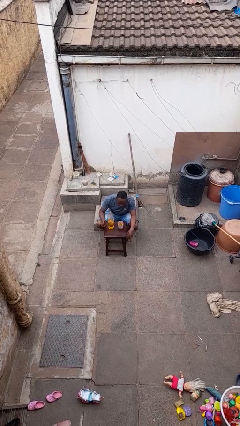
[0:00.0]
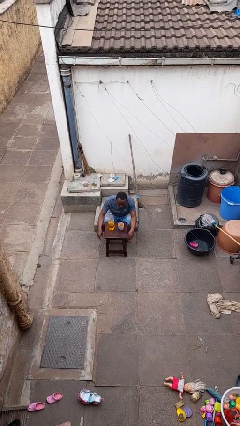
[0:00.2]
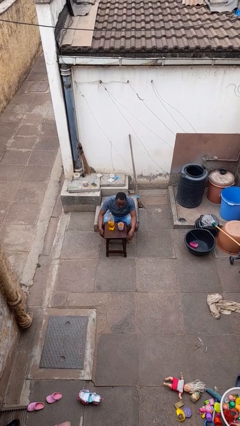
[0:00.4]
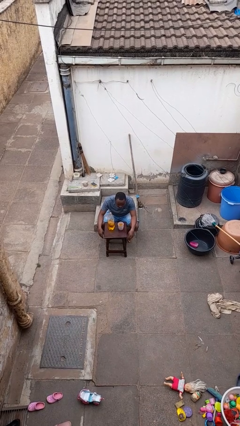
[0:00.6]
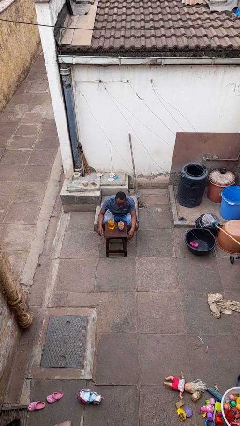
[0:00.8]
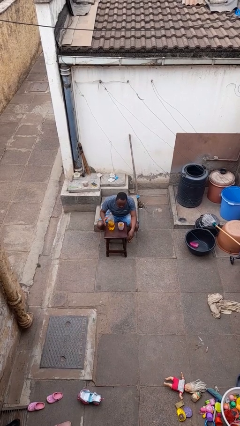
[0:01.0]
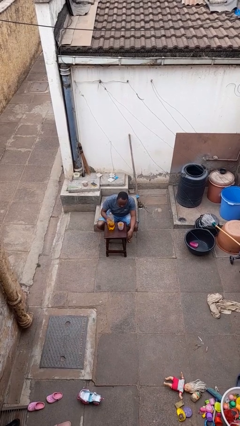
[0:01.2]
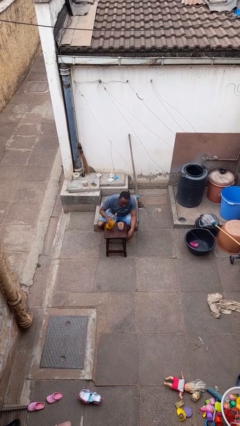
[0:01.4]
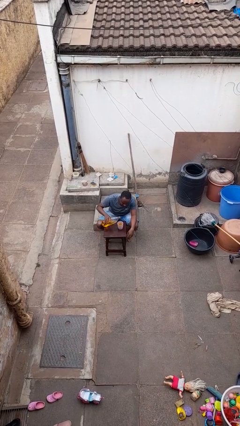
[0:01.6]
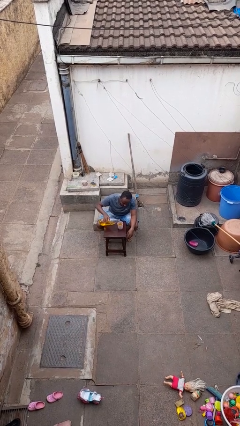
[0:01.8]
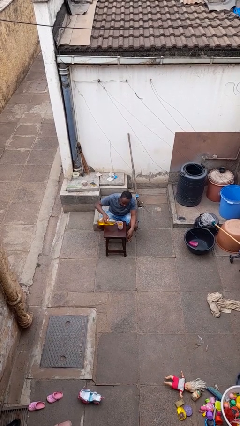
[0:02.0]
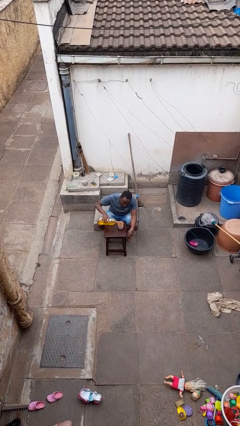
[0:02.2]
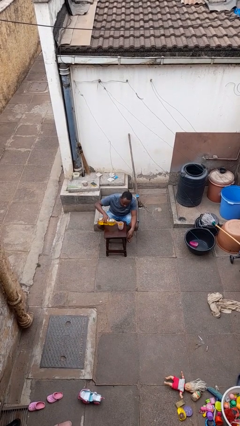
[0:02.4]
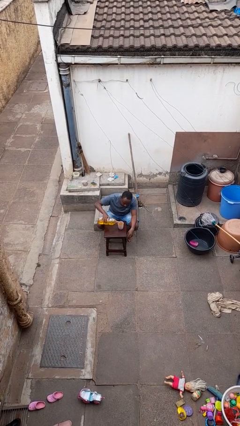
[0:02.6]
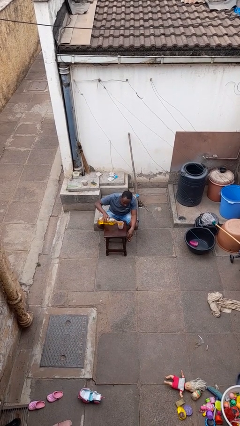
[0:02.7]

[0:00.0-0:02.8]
person pours liquid into cup

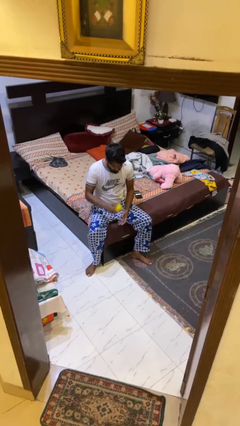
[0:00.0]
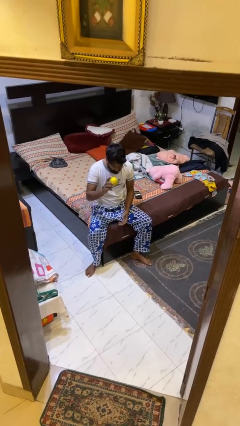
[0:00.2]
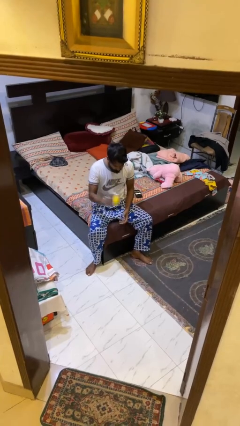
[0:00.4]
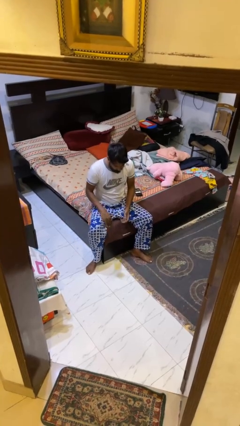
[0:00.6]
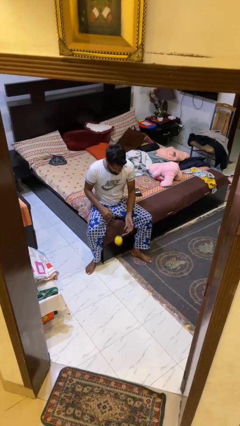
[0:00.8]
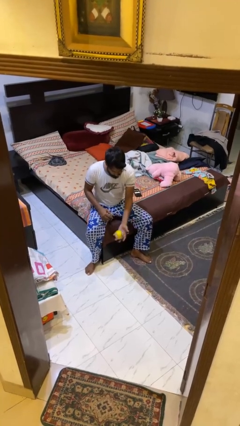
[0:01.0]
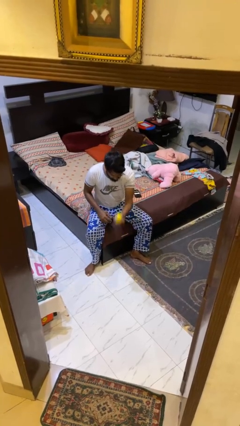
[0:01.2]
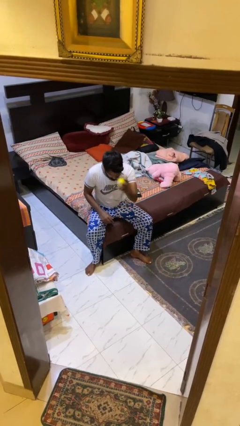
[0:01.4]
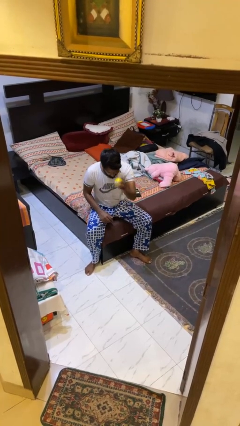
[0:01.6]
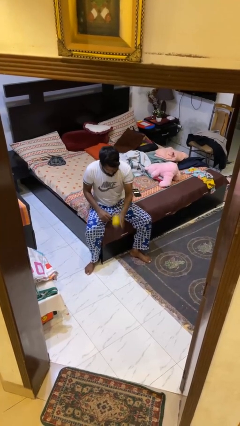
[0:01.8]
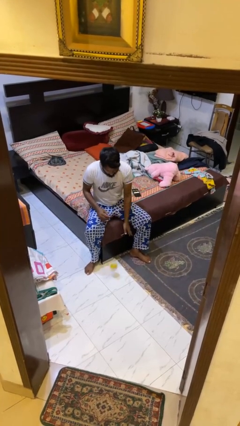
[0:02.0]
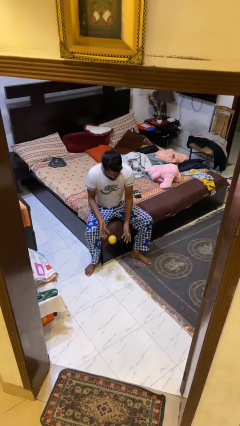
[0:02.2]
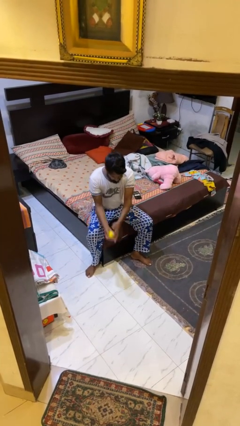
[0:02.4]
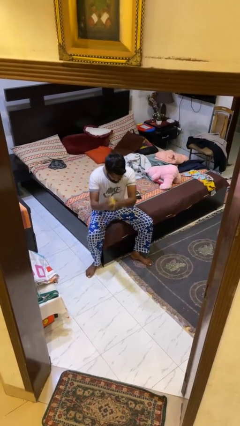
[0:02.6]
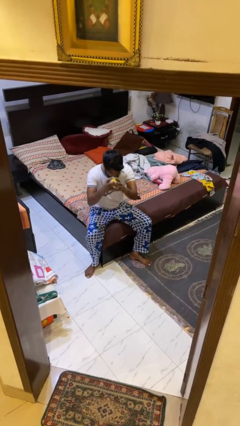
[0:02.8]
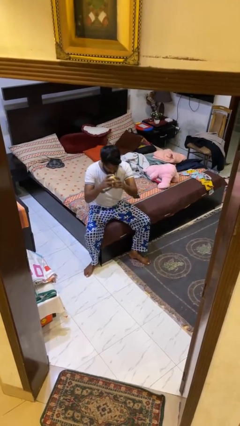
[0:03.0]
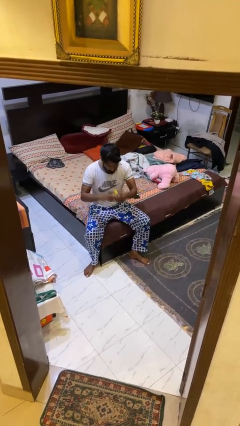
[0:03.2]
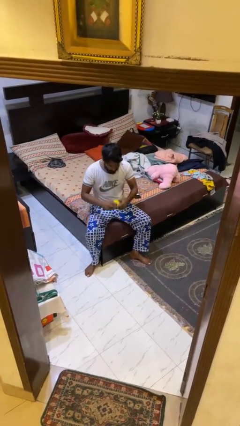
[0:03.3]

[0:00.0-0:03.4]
person bounces ball on floor

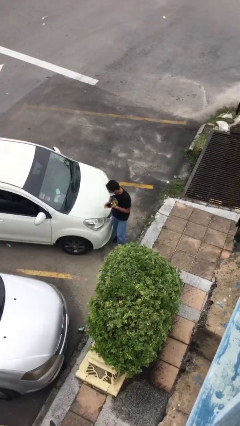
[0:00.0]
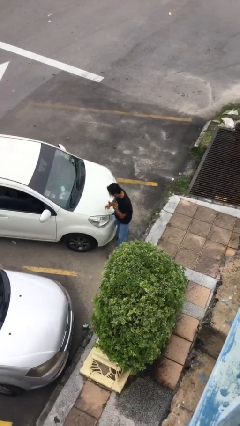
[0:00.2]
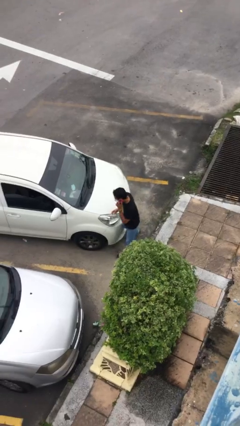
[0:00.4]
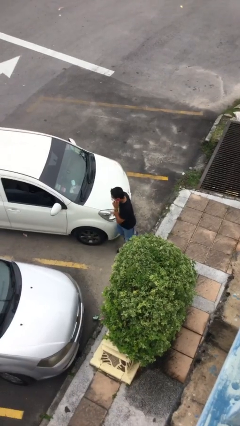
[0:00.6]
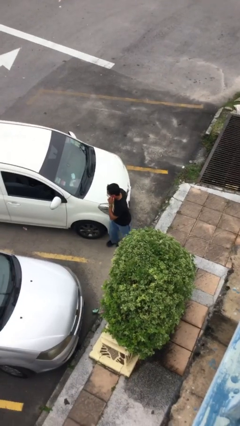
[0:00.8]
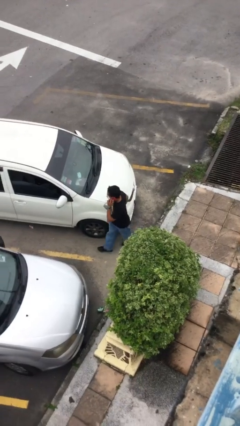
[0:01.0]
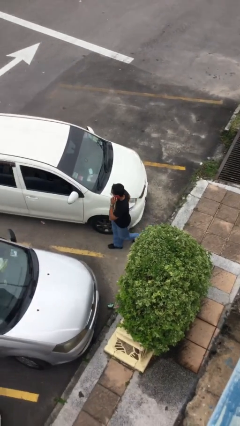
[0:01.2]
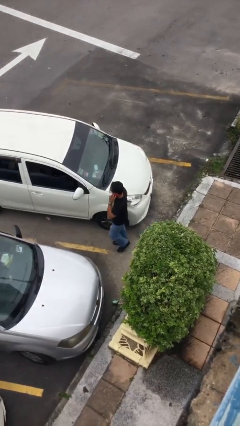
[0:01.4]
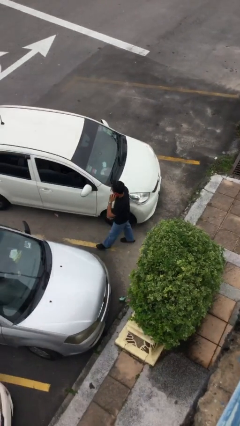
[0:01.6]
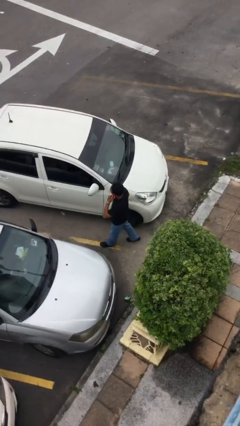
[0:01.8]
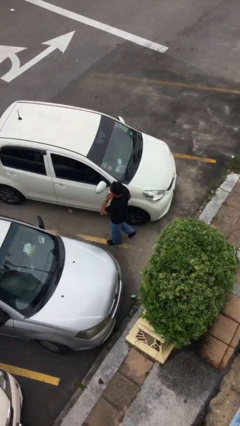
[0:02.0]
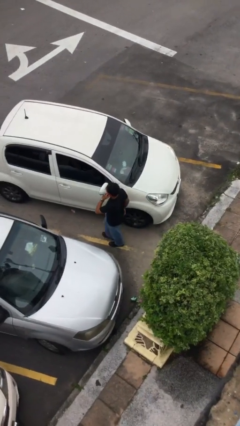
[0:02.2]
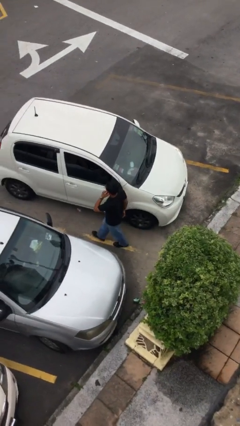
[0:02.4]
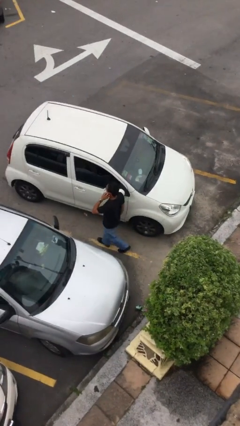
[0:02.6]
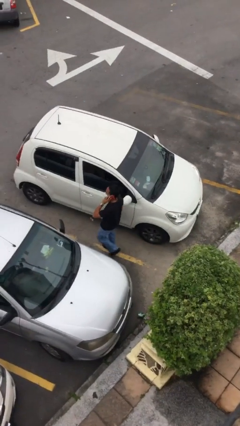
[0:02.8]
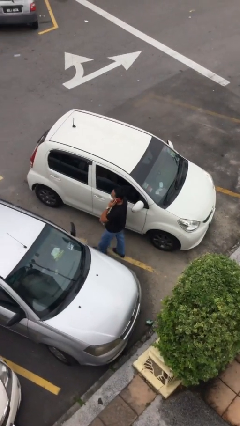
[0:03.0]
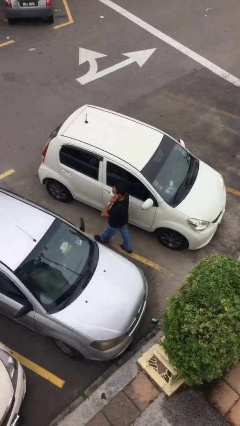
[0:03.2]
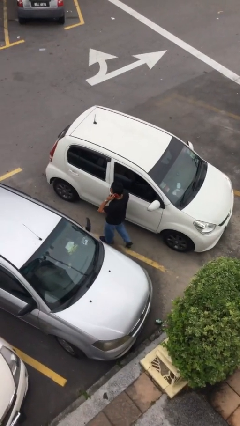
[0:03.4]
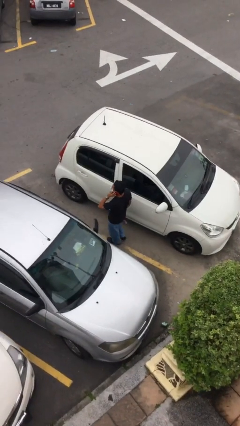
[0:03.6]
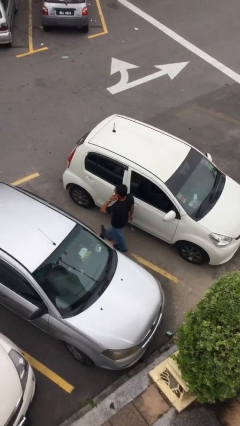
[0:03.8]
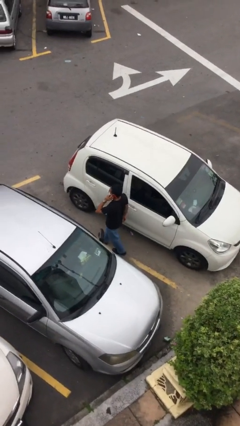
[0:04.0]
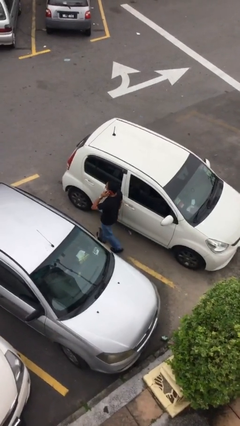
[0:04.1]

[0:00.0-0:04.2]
person talks on phone

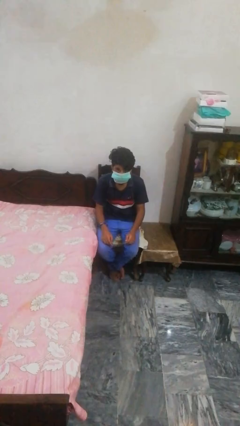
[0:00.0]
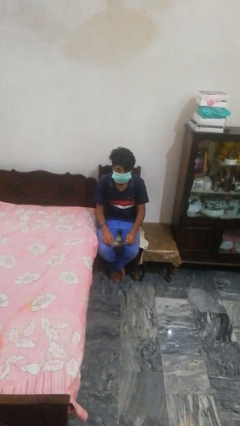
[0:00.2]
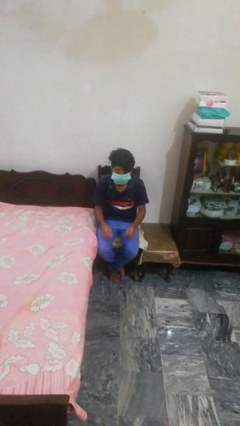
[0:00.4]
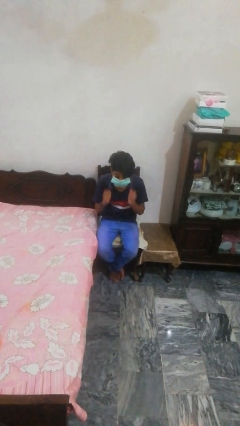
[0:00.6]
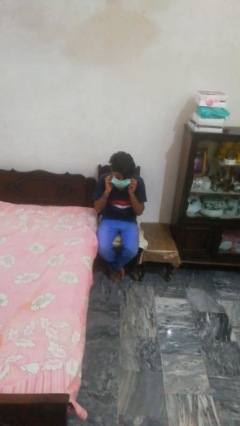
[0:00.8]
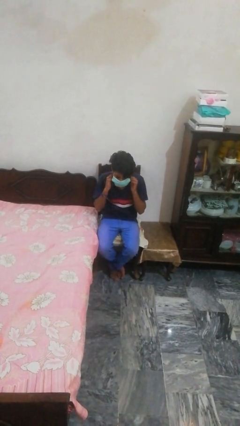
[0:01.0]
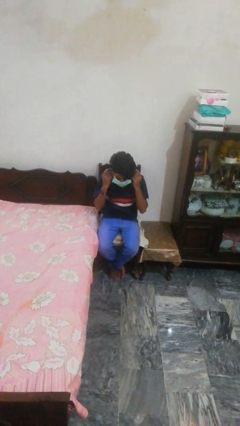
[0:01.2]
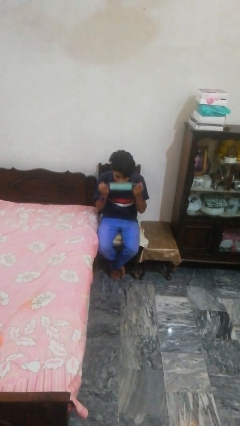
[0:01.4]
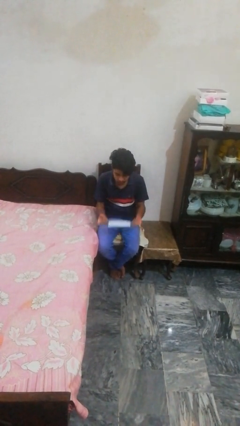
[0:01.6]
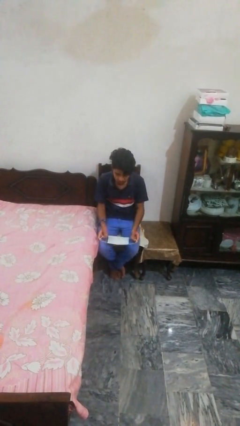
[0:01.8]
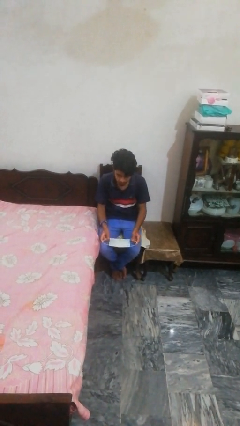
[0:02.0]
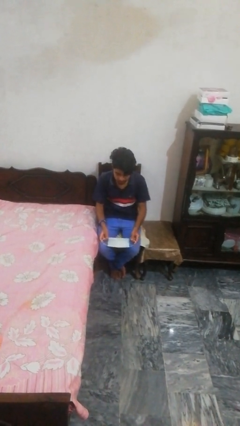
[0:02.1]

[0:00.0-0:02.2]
person takes off facemask

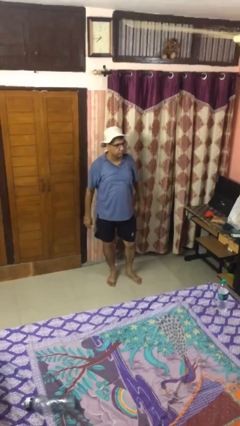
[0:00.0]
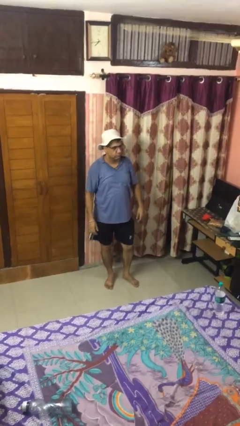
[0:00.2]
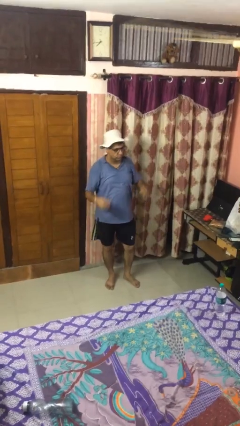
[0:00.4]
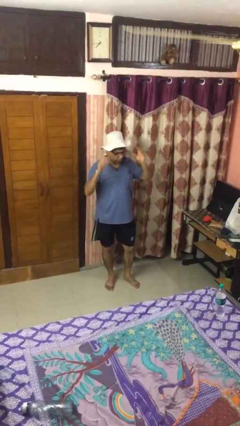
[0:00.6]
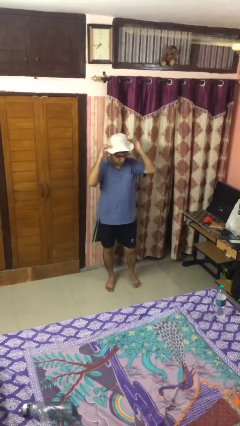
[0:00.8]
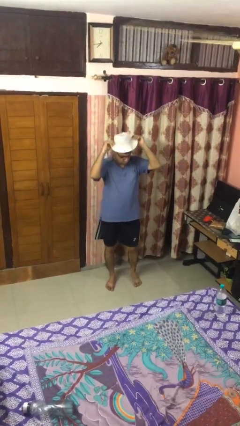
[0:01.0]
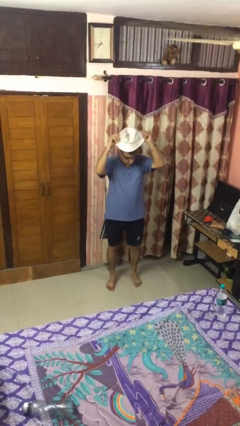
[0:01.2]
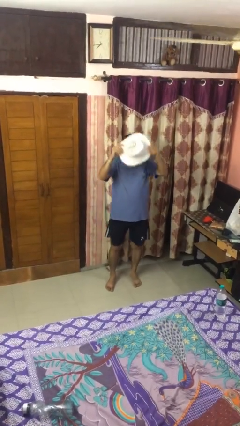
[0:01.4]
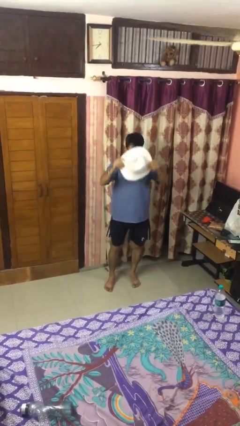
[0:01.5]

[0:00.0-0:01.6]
person takes off hat

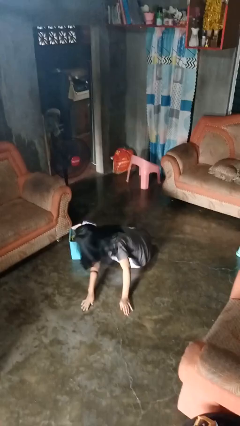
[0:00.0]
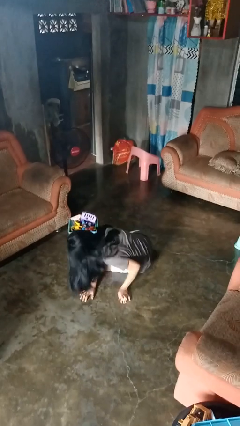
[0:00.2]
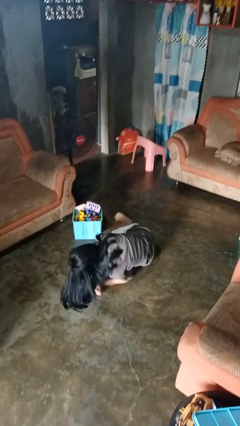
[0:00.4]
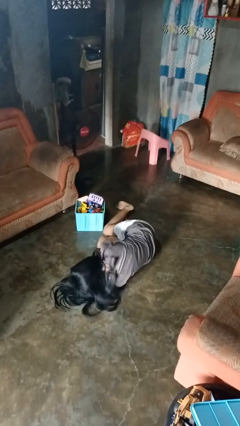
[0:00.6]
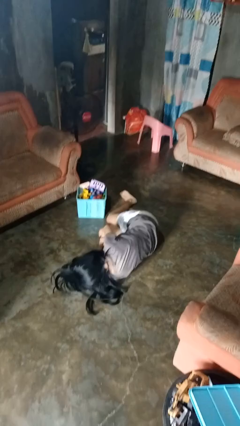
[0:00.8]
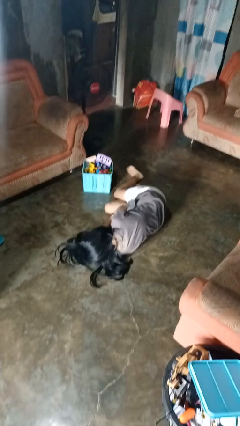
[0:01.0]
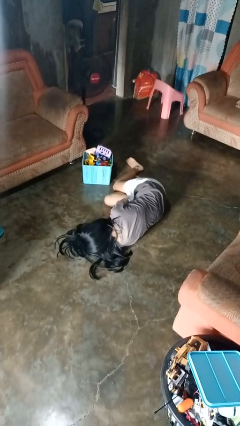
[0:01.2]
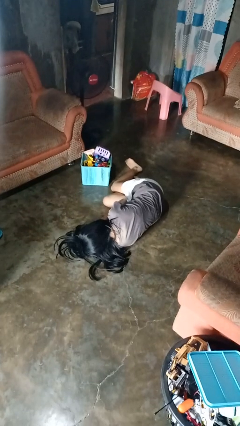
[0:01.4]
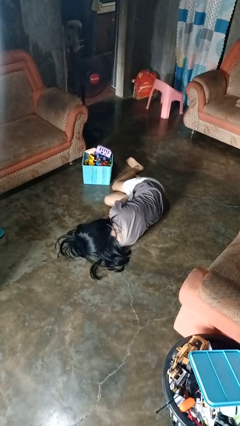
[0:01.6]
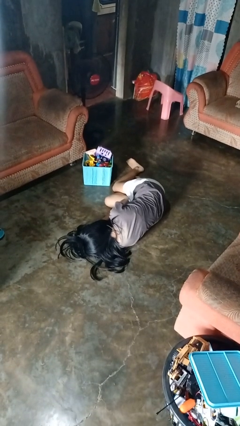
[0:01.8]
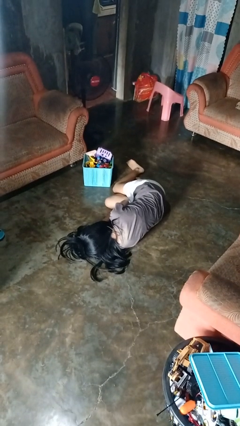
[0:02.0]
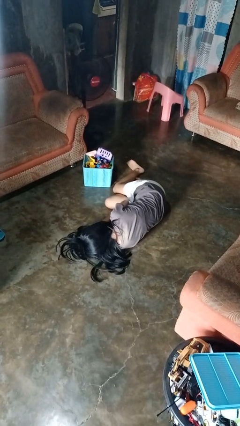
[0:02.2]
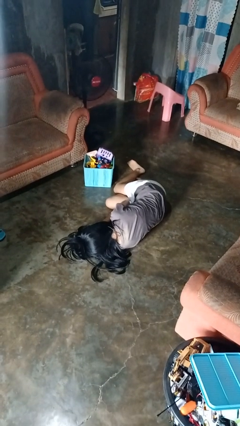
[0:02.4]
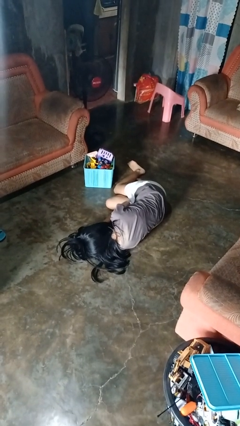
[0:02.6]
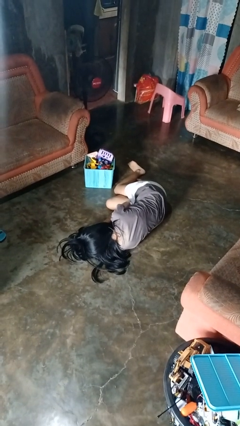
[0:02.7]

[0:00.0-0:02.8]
person lies down on floor

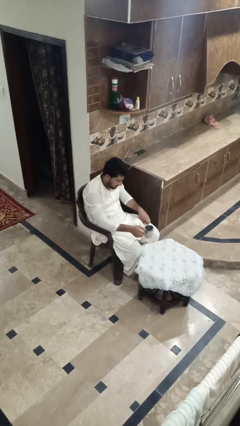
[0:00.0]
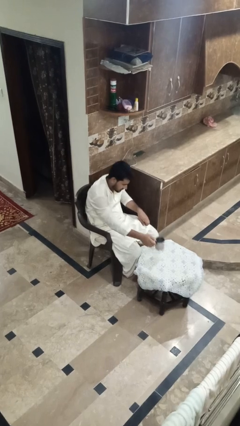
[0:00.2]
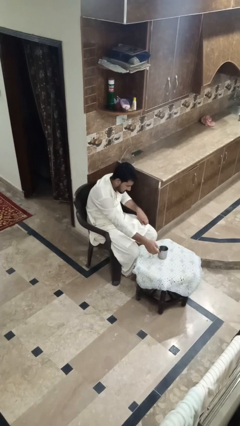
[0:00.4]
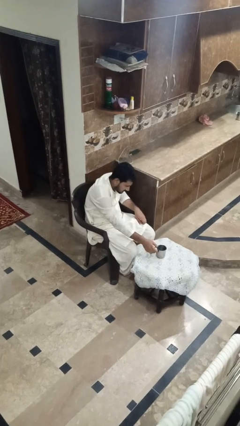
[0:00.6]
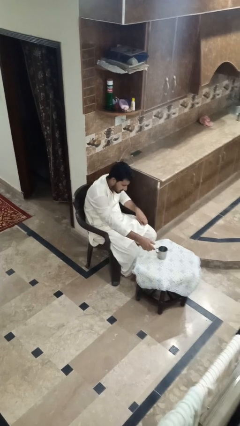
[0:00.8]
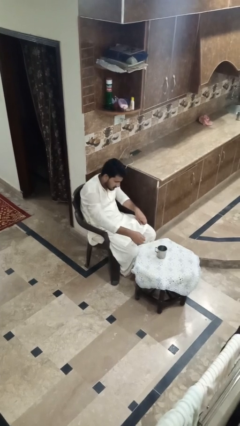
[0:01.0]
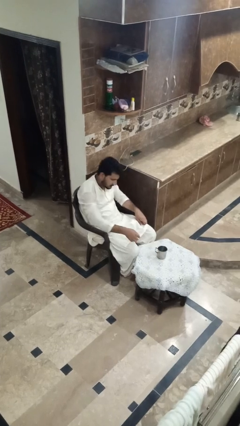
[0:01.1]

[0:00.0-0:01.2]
person puts down object on table
